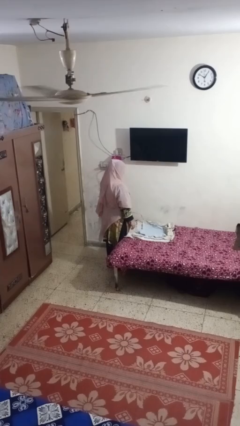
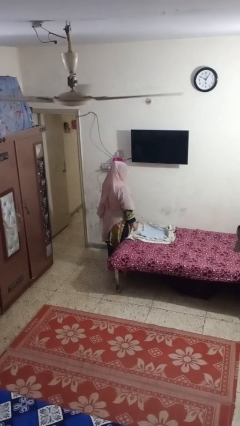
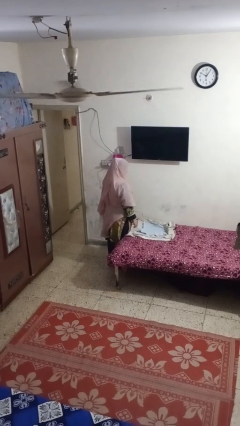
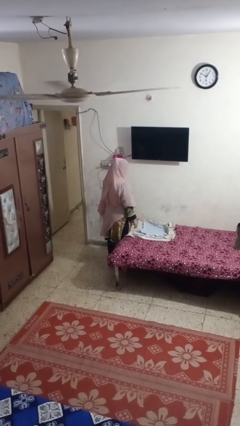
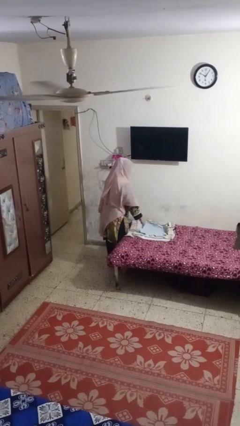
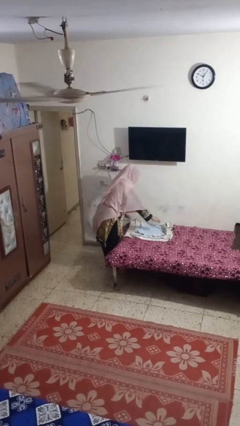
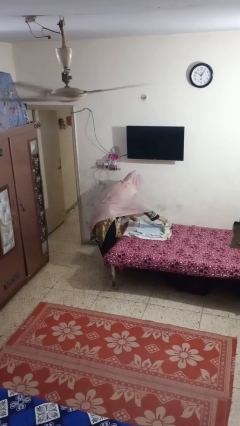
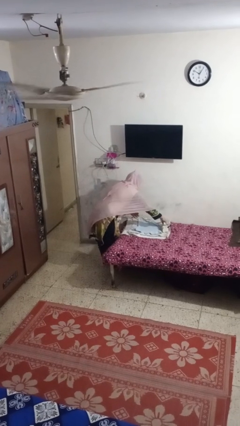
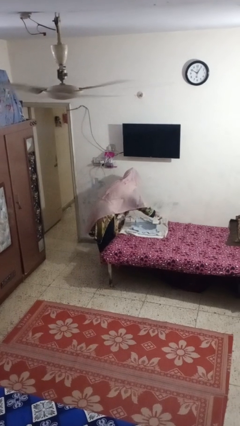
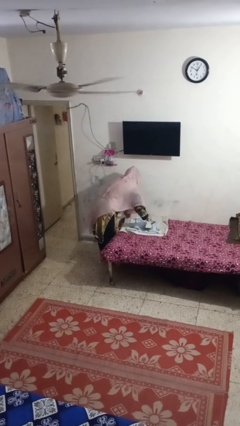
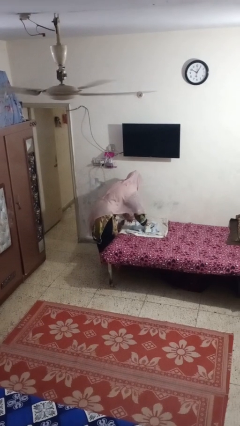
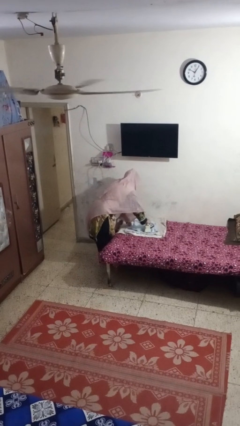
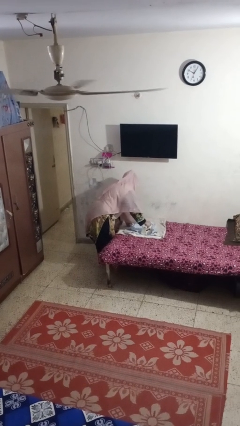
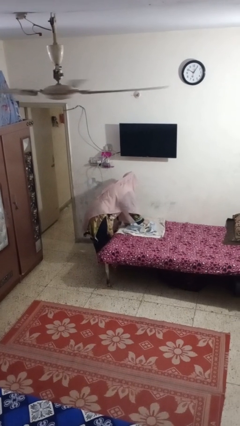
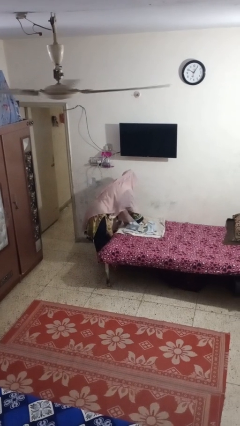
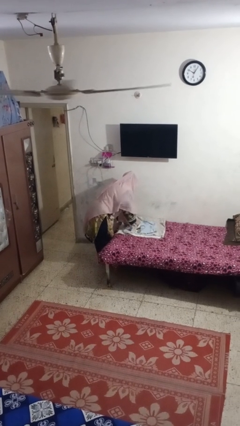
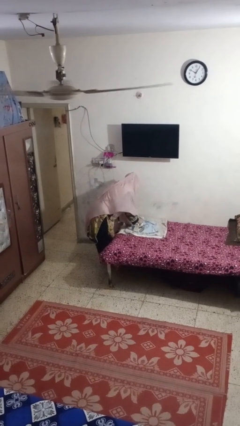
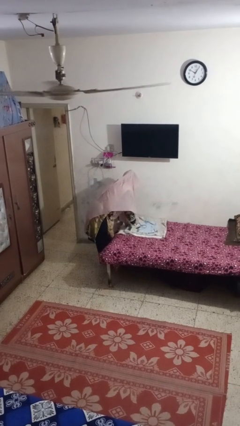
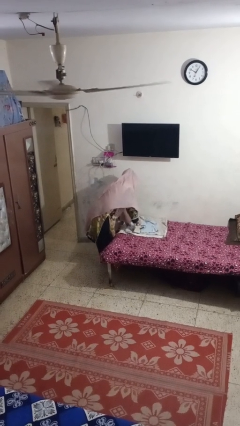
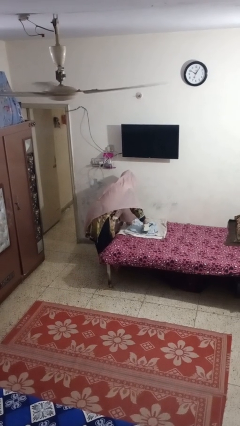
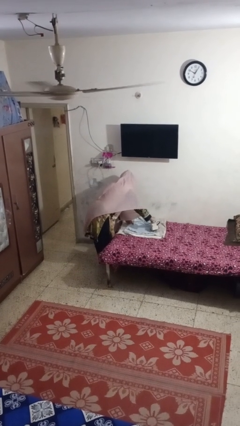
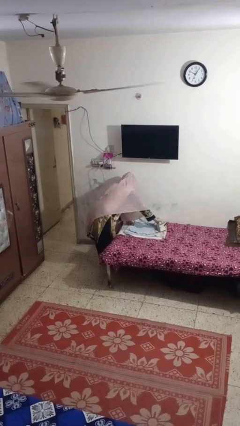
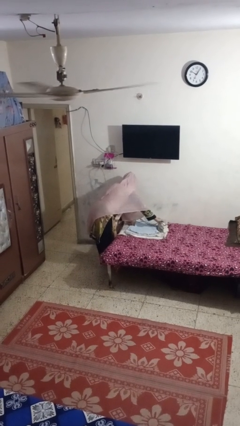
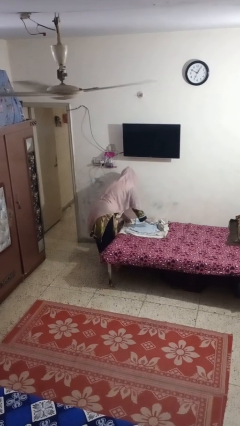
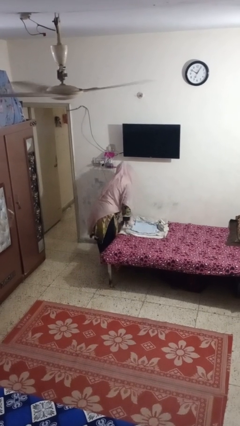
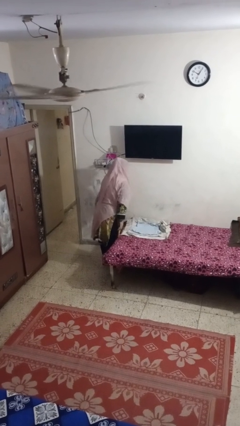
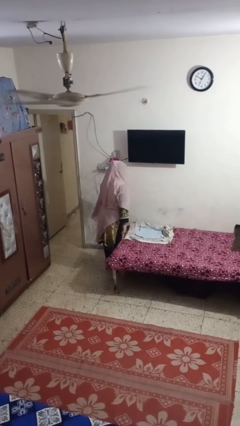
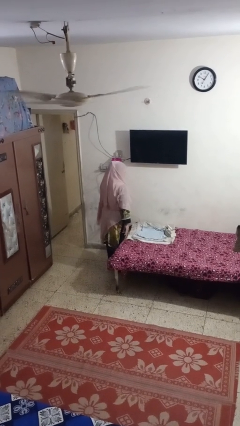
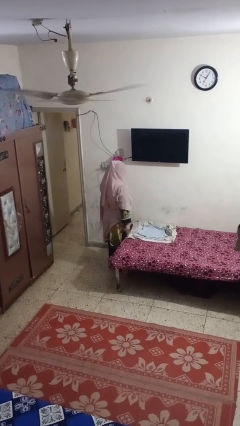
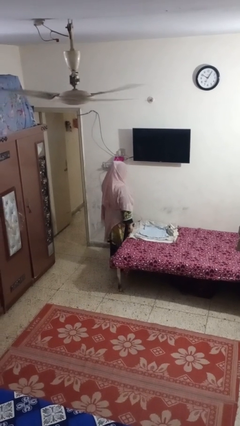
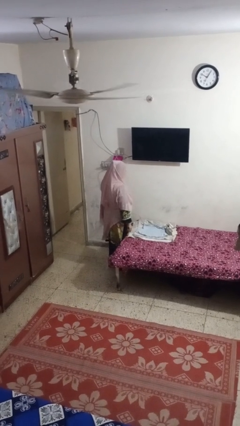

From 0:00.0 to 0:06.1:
person irons clothes

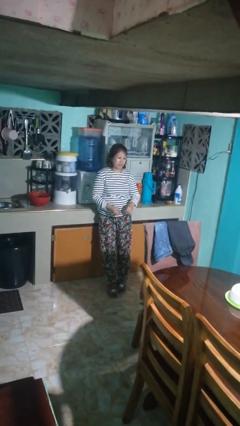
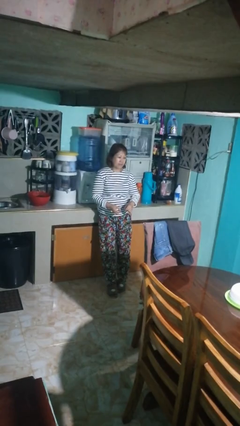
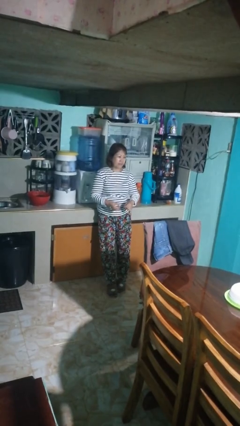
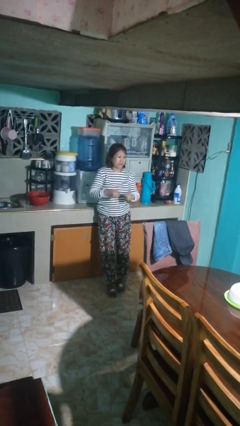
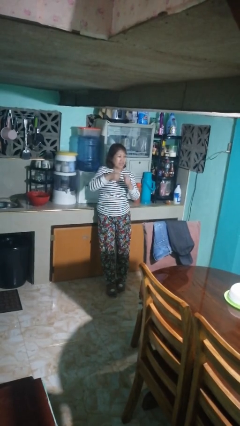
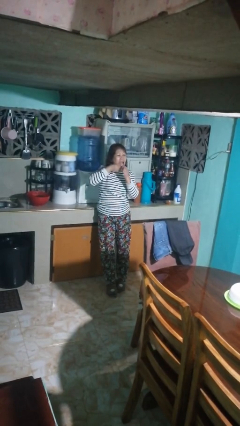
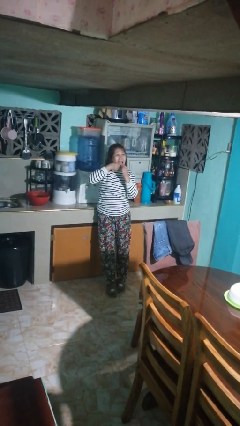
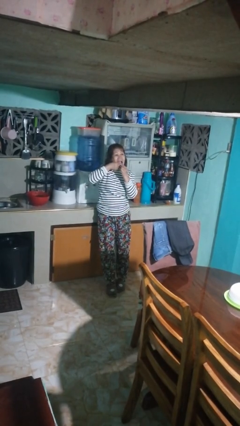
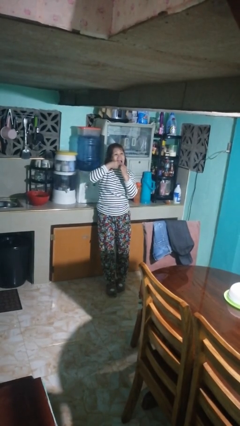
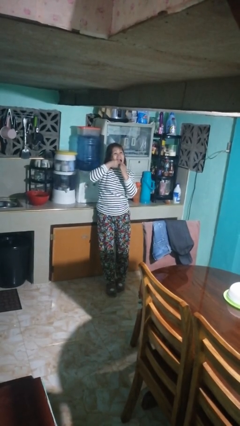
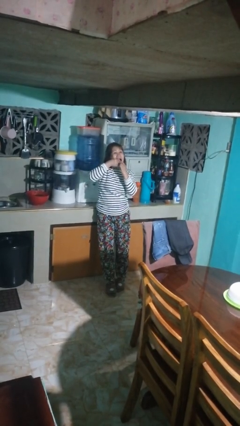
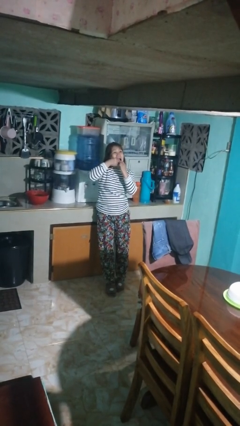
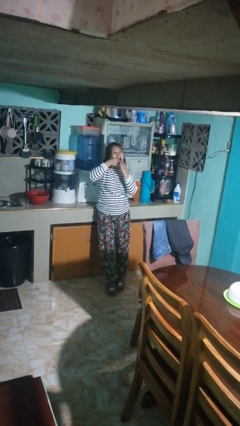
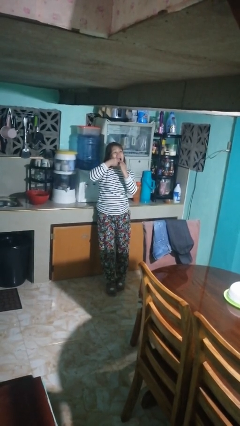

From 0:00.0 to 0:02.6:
person flosses

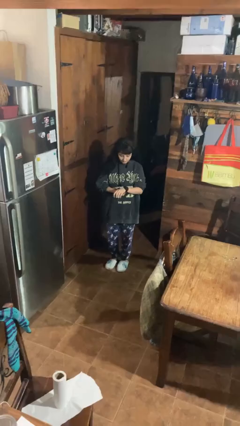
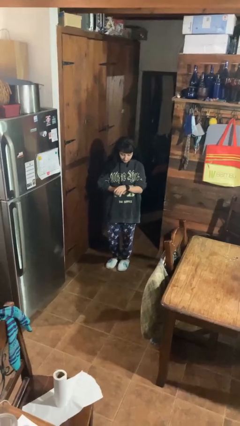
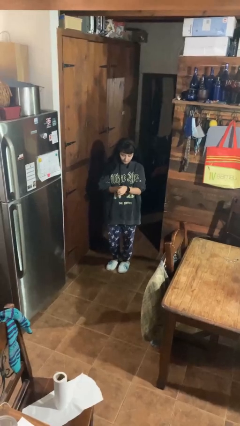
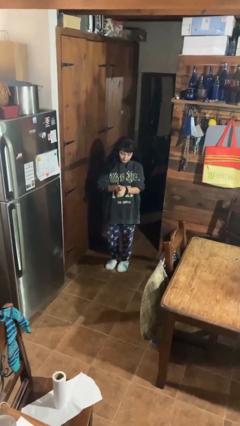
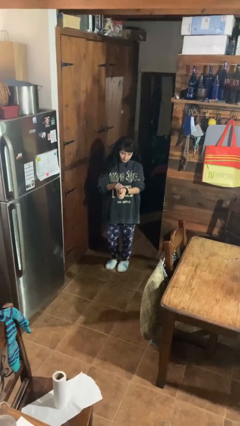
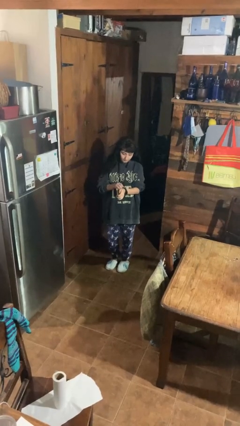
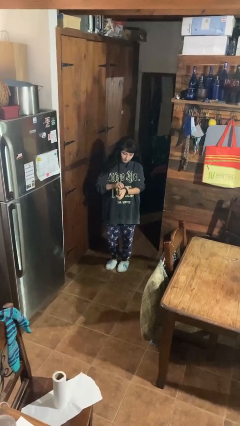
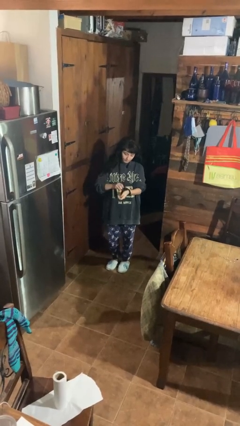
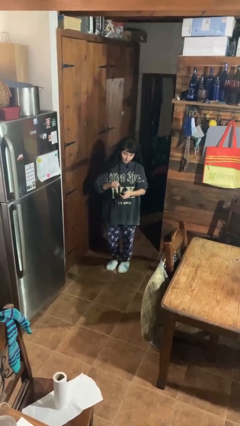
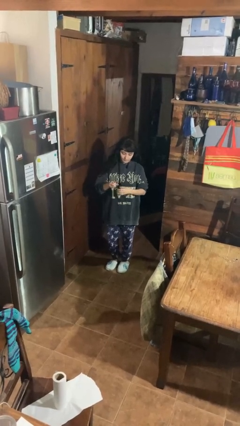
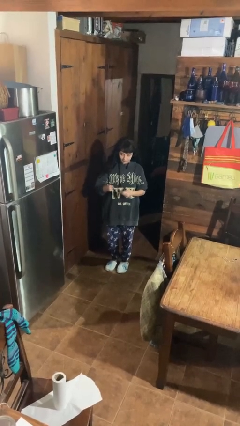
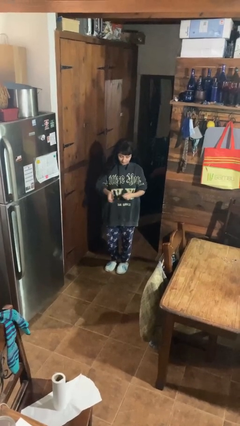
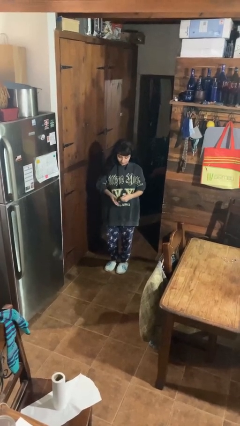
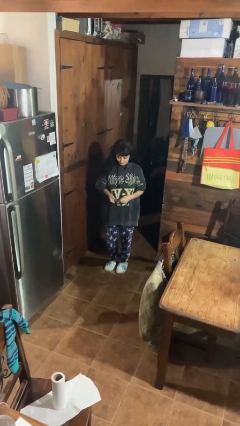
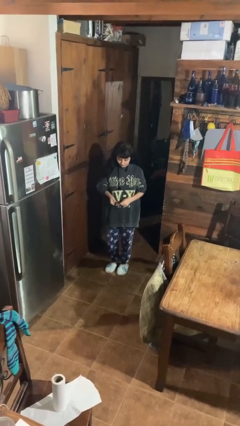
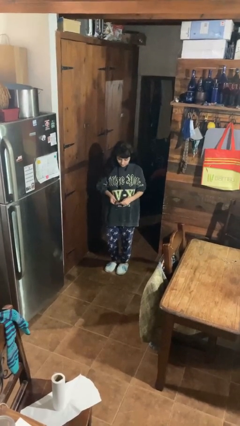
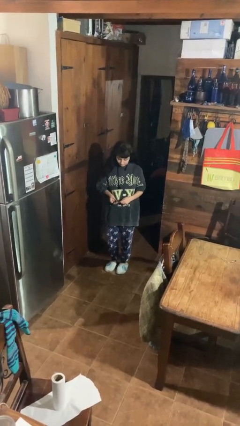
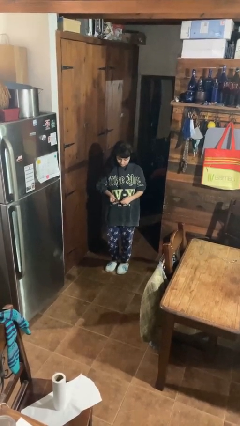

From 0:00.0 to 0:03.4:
person takes off wristwatch

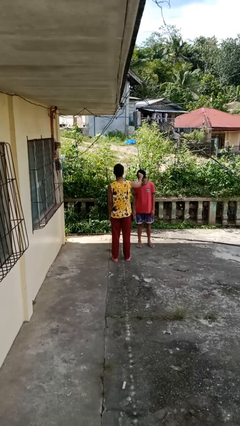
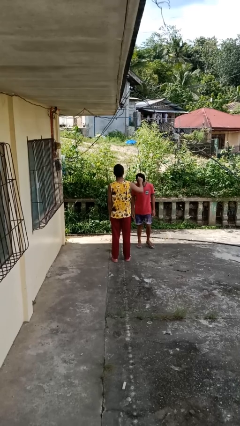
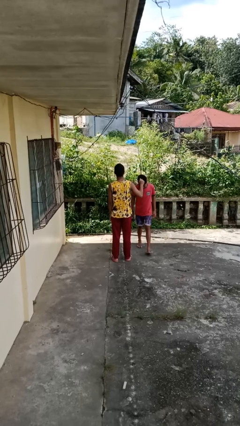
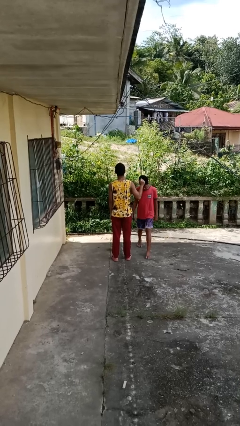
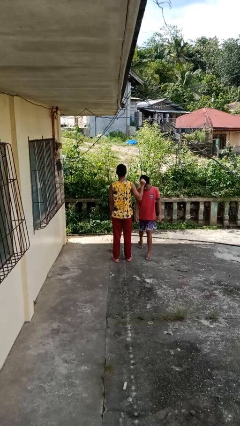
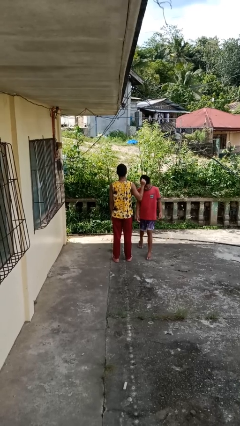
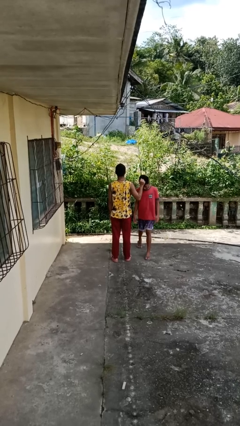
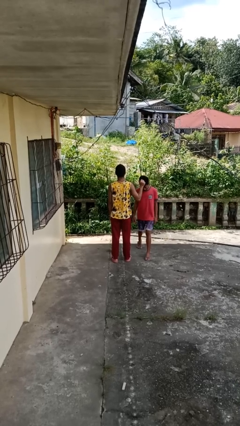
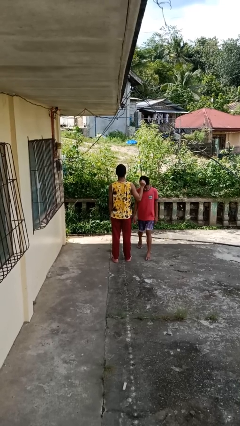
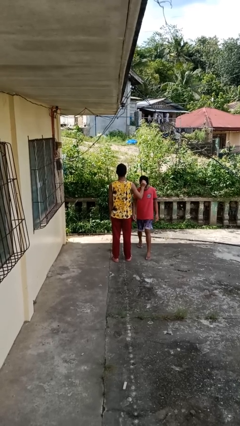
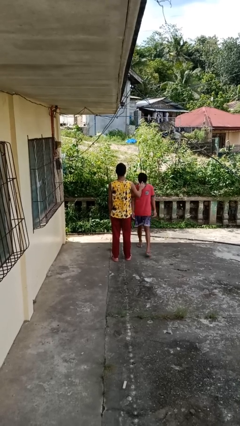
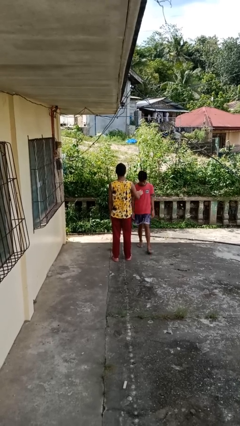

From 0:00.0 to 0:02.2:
person grabs person by hair

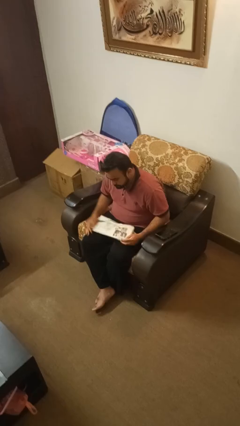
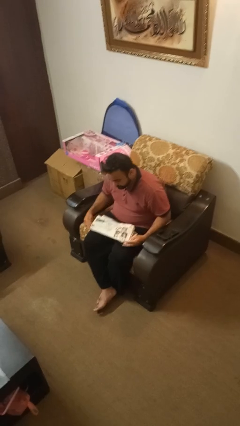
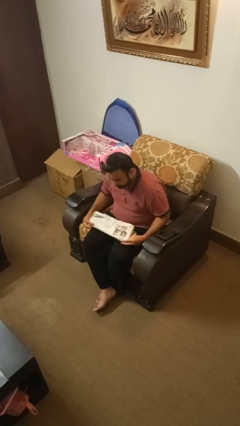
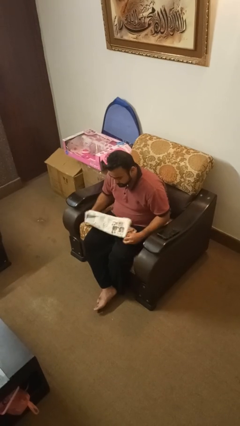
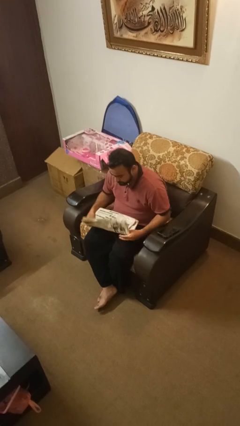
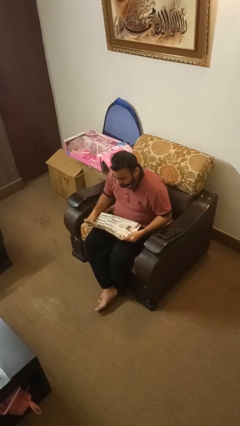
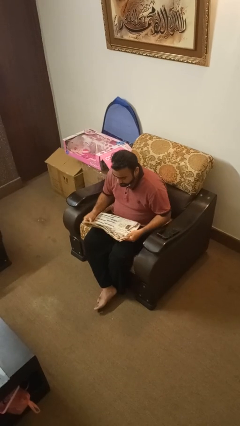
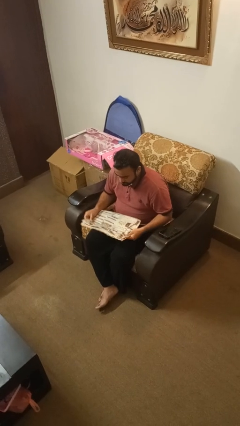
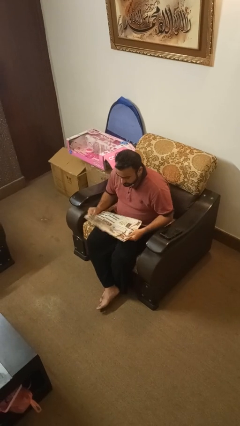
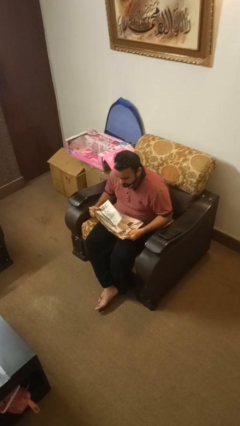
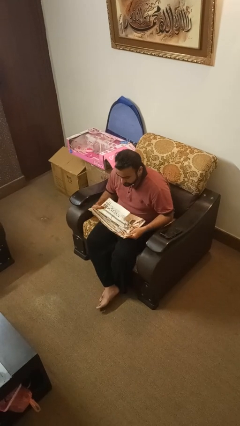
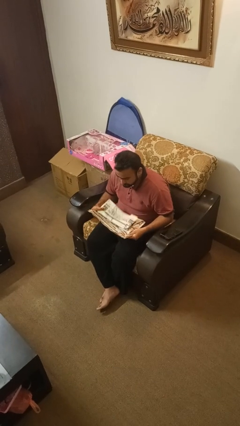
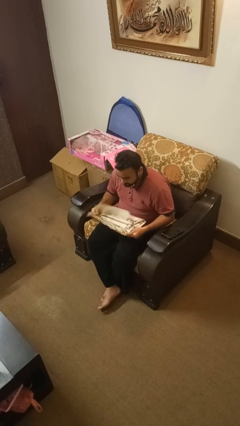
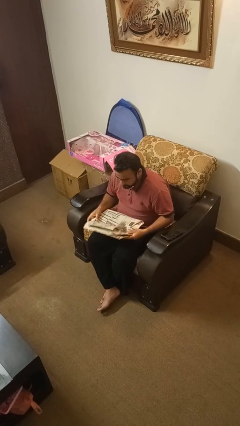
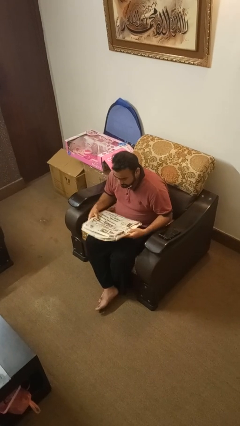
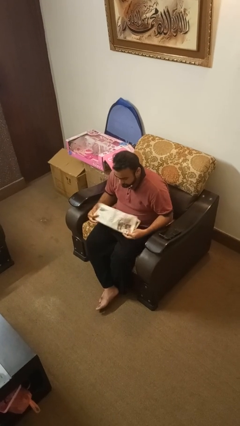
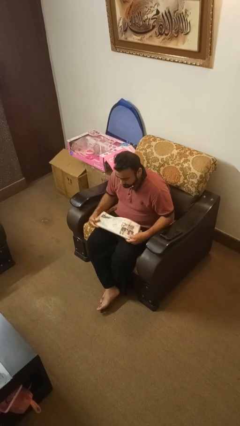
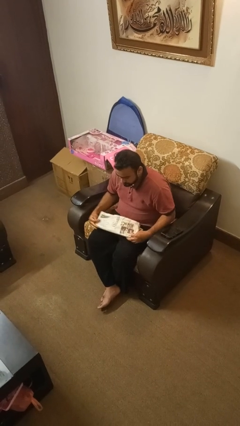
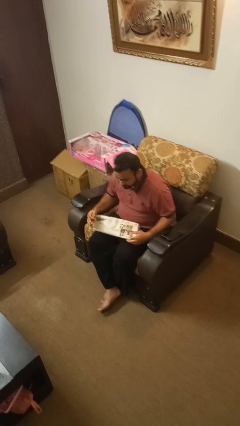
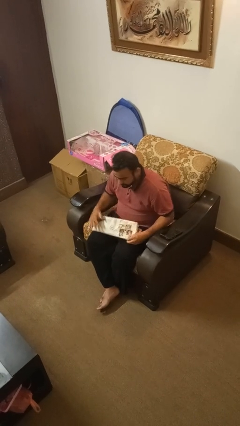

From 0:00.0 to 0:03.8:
person reads newspaper
